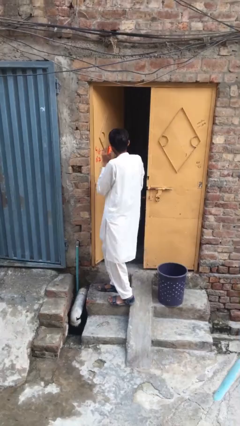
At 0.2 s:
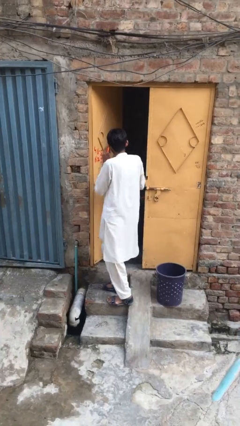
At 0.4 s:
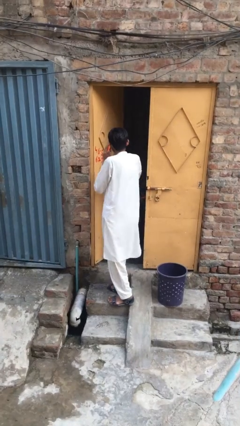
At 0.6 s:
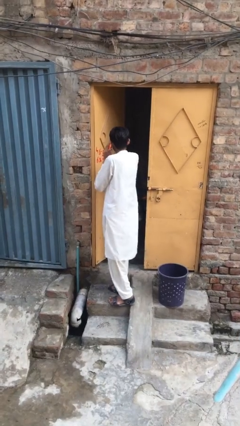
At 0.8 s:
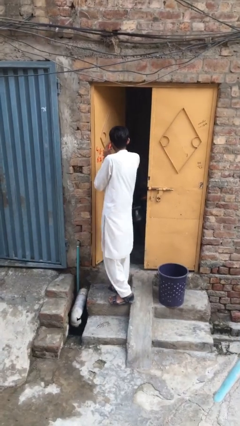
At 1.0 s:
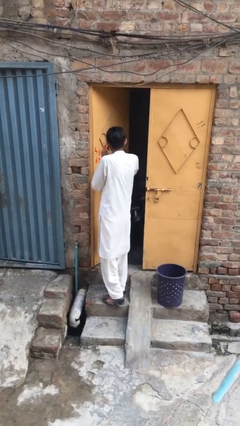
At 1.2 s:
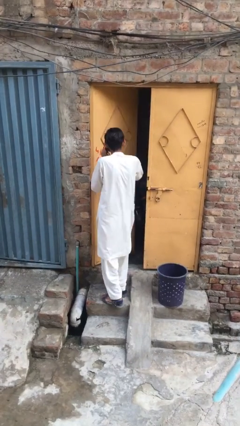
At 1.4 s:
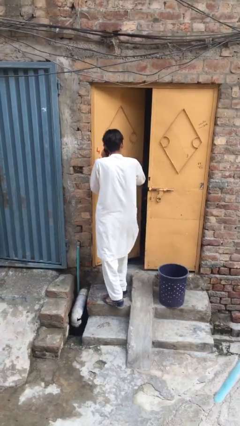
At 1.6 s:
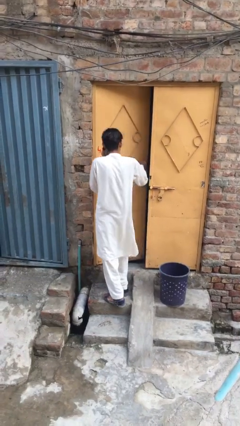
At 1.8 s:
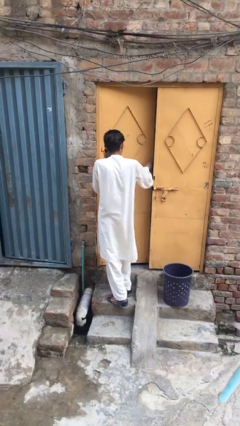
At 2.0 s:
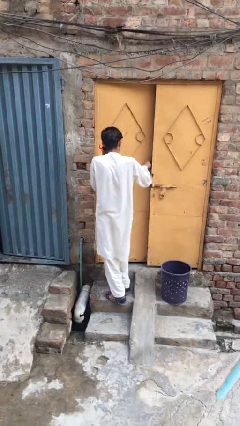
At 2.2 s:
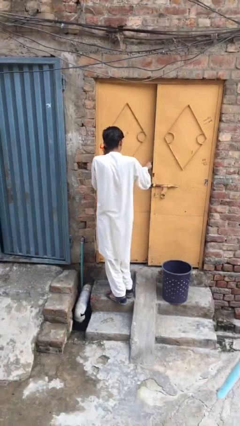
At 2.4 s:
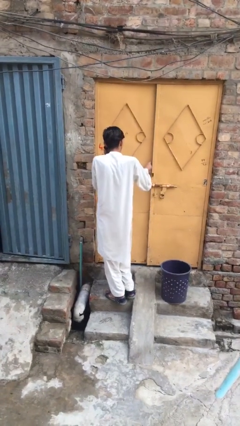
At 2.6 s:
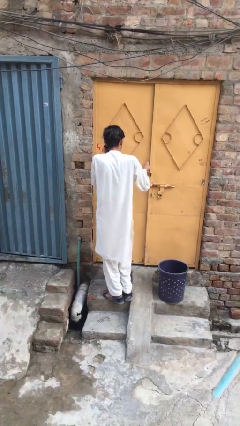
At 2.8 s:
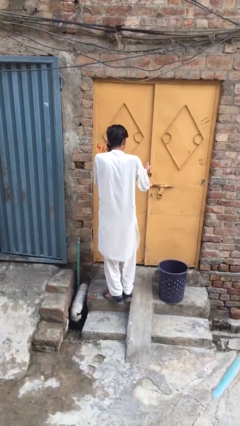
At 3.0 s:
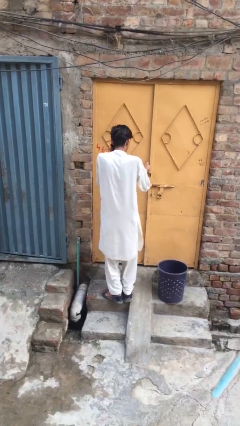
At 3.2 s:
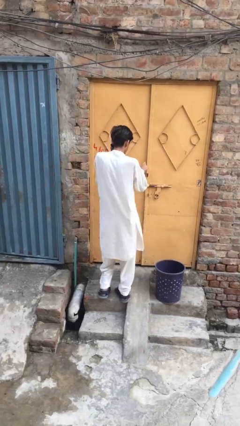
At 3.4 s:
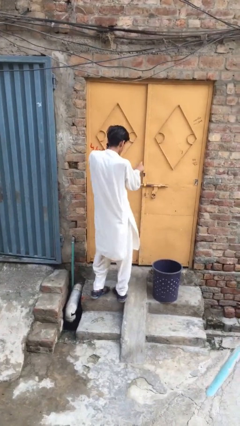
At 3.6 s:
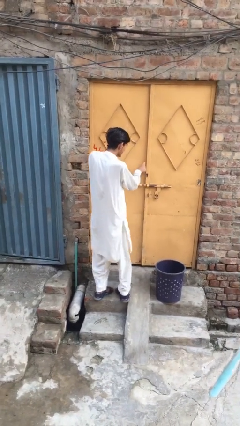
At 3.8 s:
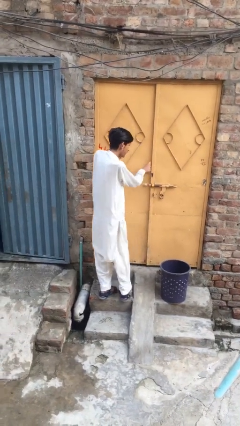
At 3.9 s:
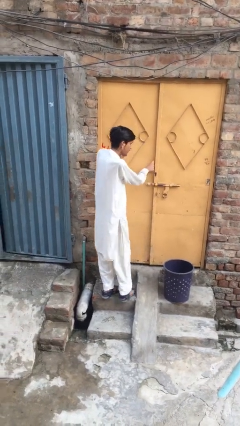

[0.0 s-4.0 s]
person closes facility door

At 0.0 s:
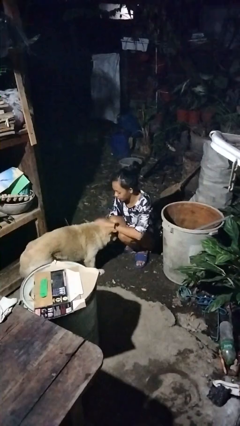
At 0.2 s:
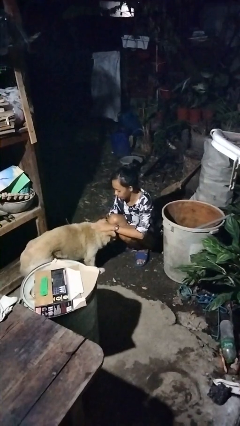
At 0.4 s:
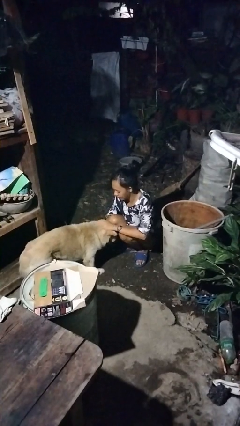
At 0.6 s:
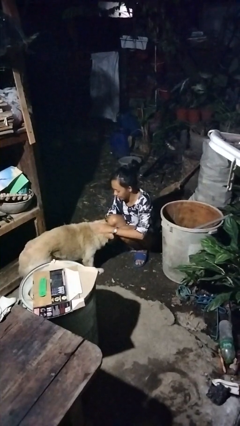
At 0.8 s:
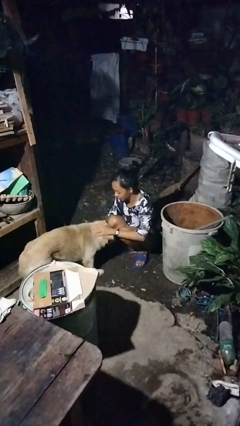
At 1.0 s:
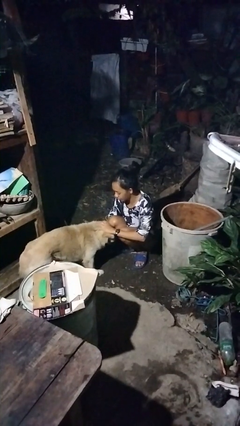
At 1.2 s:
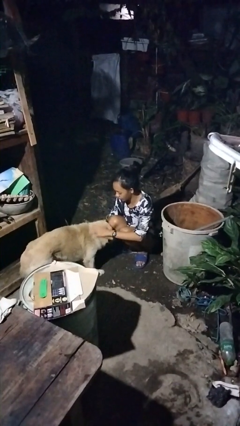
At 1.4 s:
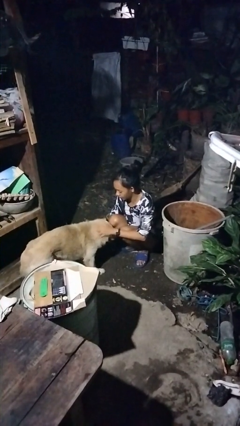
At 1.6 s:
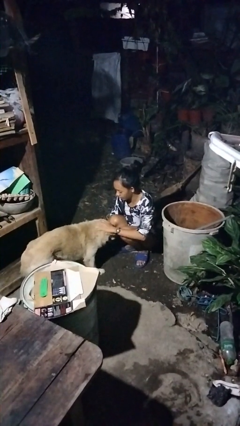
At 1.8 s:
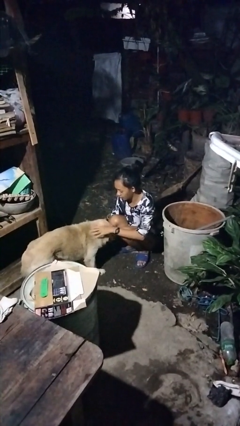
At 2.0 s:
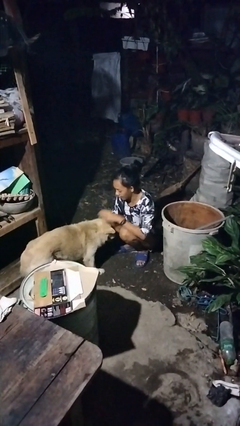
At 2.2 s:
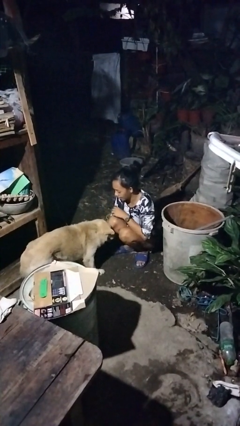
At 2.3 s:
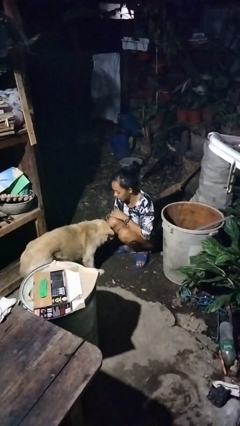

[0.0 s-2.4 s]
person pets dog

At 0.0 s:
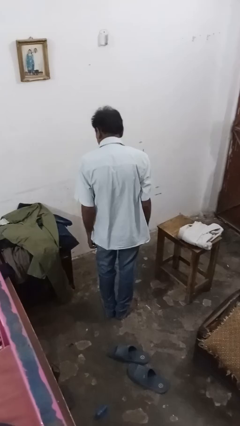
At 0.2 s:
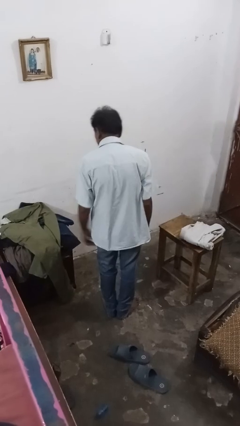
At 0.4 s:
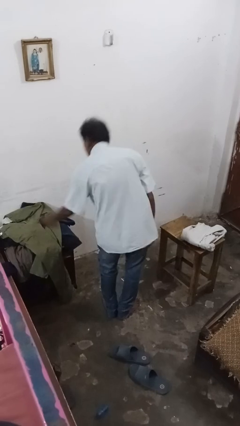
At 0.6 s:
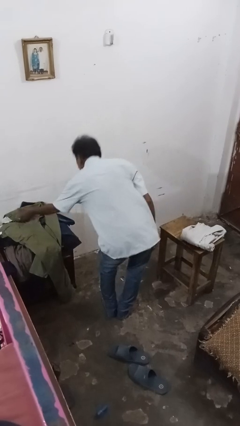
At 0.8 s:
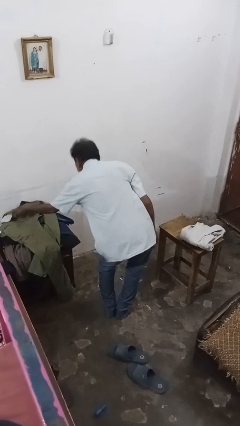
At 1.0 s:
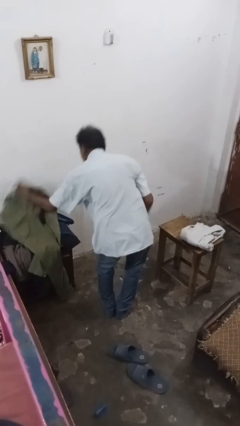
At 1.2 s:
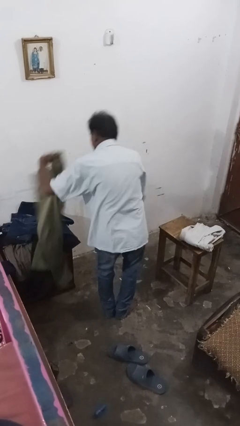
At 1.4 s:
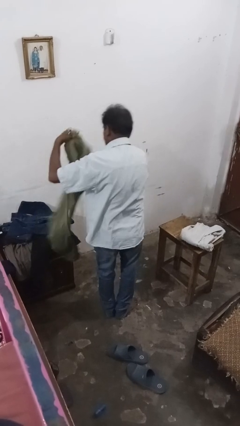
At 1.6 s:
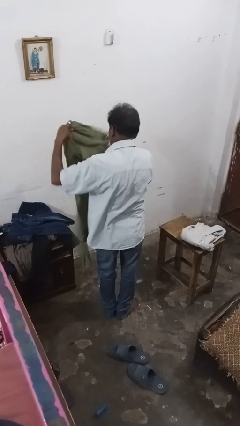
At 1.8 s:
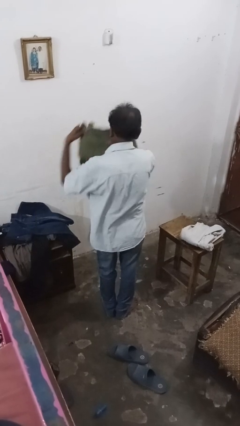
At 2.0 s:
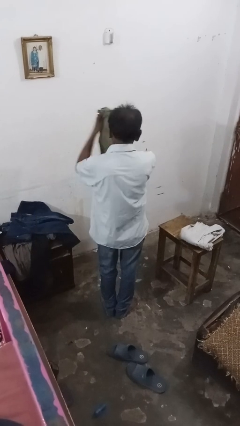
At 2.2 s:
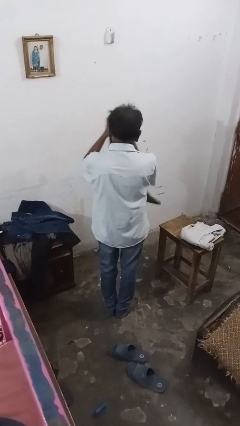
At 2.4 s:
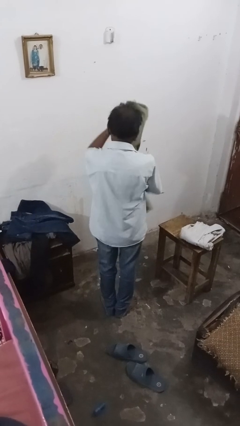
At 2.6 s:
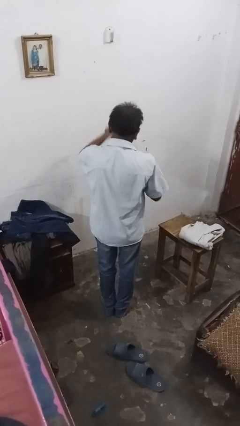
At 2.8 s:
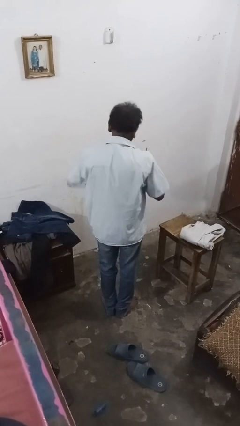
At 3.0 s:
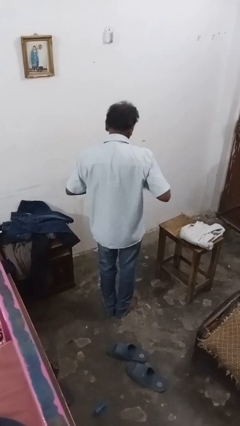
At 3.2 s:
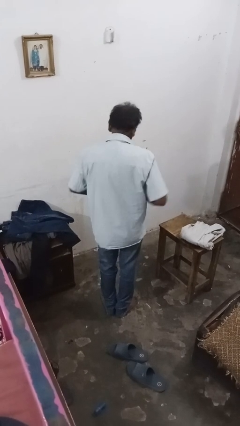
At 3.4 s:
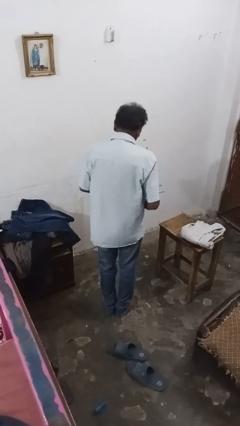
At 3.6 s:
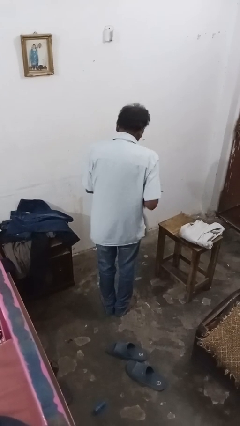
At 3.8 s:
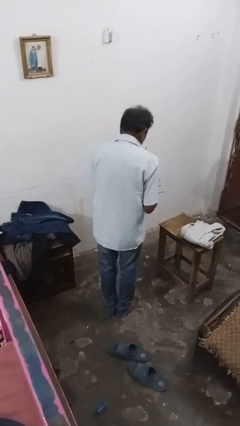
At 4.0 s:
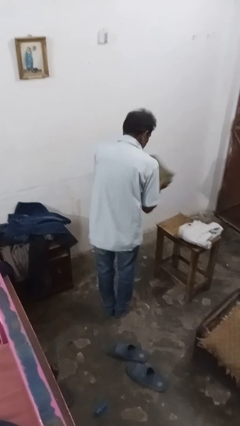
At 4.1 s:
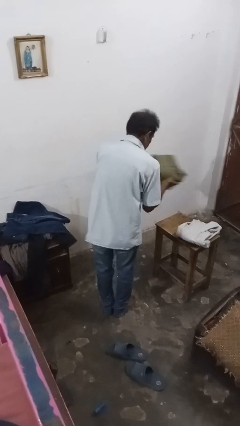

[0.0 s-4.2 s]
person folds pants

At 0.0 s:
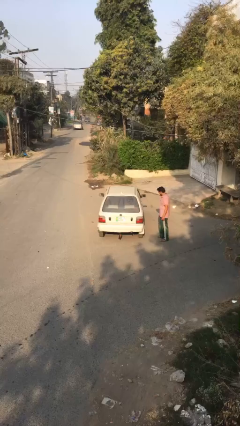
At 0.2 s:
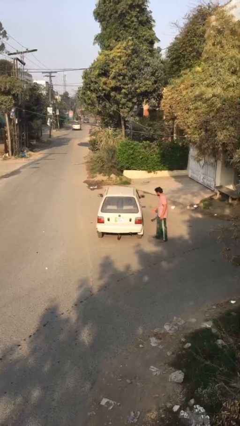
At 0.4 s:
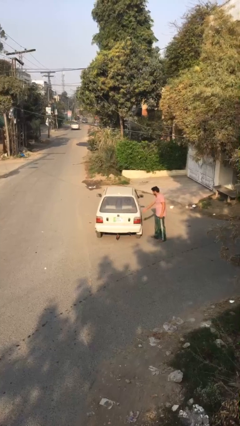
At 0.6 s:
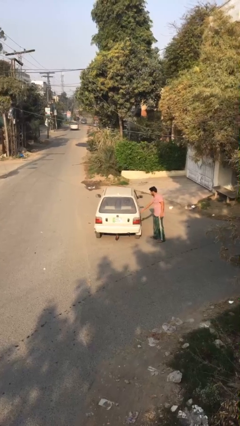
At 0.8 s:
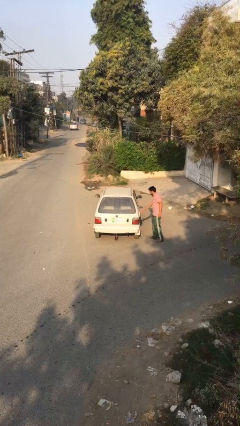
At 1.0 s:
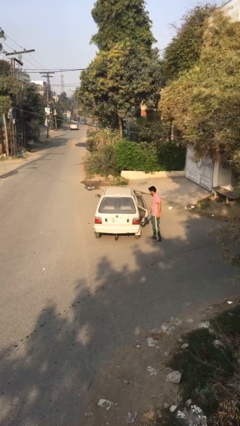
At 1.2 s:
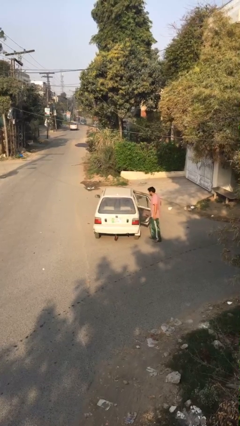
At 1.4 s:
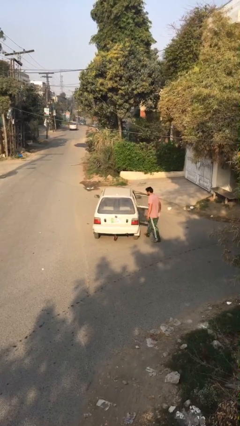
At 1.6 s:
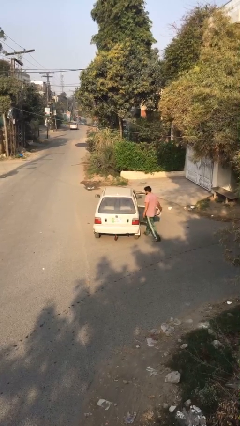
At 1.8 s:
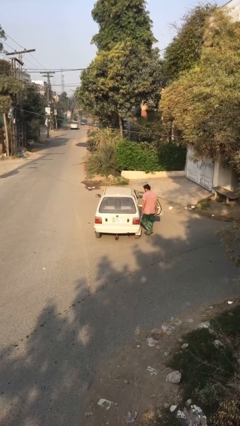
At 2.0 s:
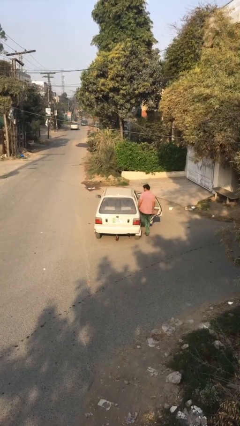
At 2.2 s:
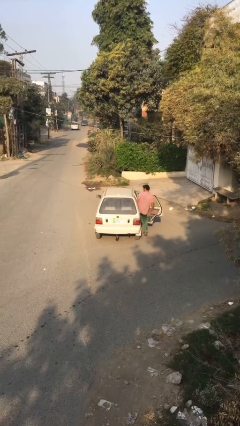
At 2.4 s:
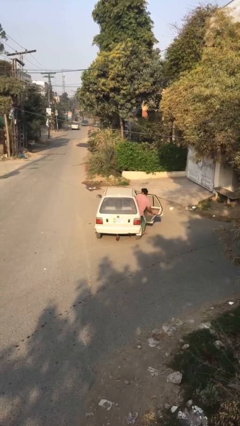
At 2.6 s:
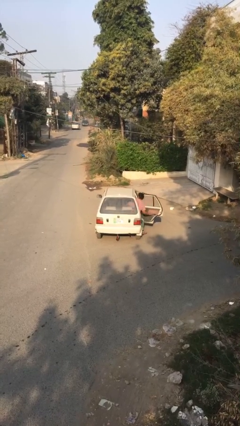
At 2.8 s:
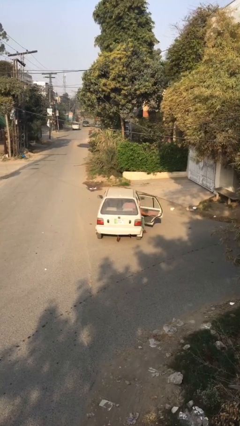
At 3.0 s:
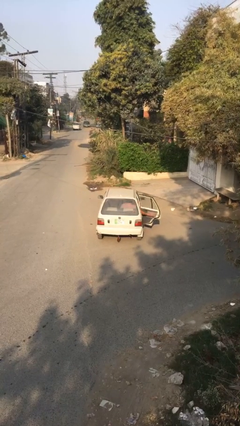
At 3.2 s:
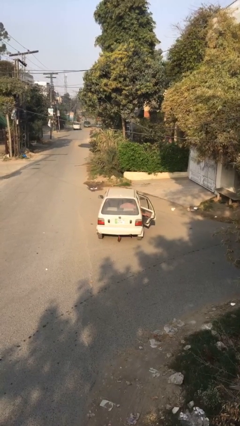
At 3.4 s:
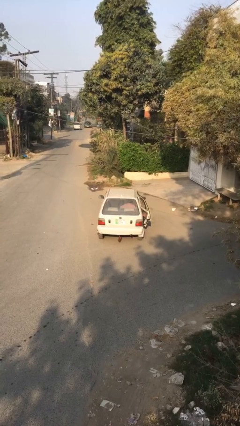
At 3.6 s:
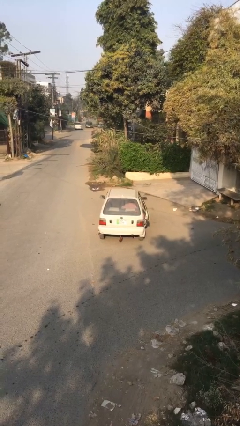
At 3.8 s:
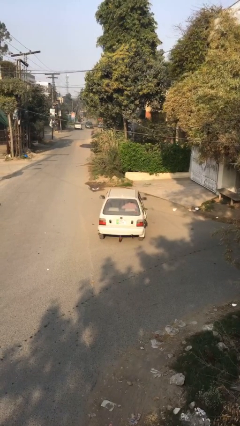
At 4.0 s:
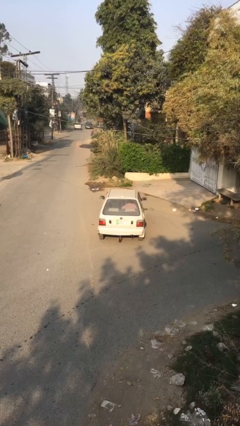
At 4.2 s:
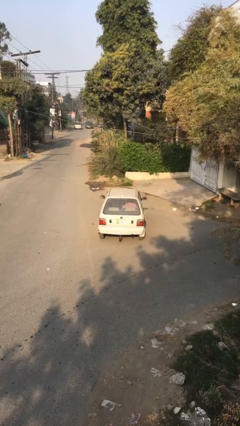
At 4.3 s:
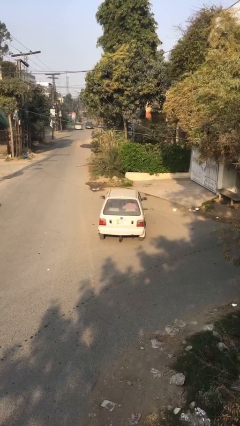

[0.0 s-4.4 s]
car picks up person

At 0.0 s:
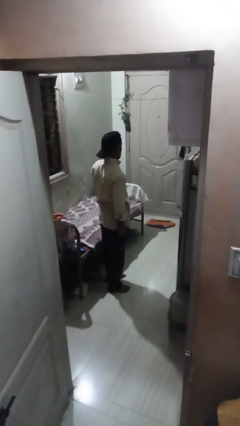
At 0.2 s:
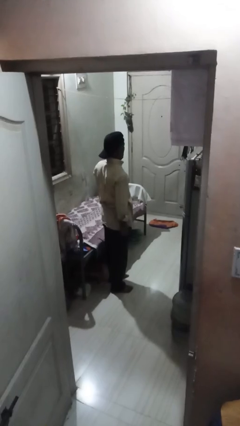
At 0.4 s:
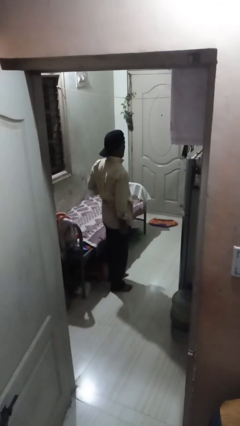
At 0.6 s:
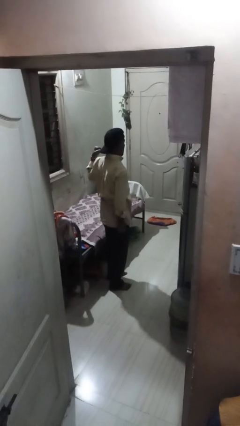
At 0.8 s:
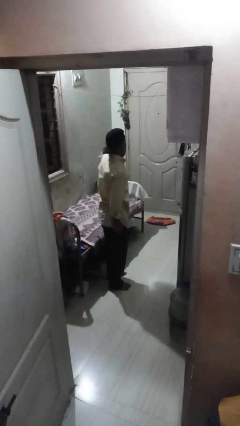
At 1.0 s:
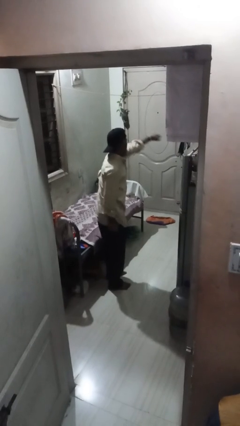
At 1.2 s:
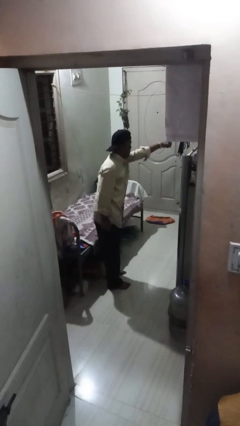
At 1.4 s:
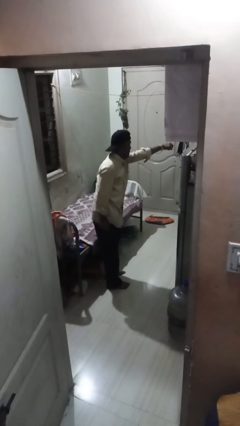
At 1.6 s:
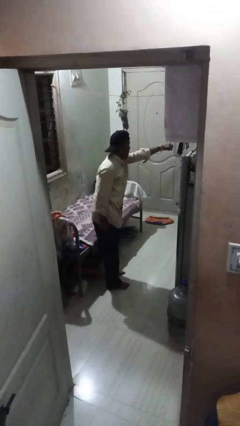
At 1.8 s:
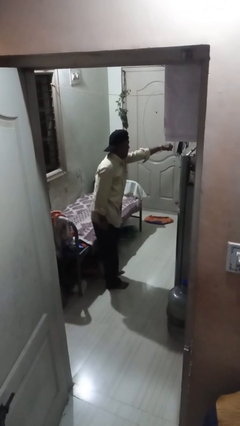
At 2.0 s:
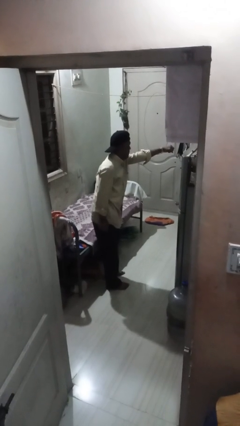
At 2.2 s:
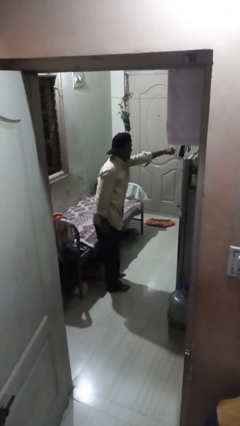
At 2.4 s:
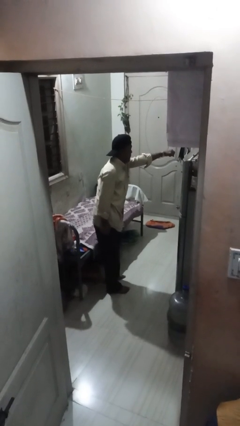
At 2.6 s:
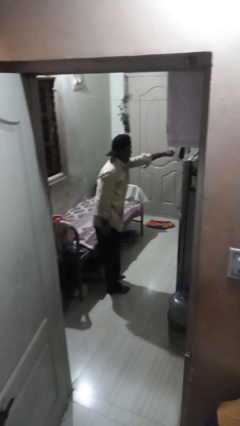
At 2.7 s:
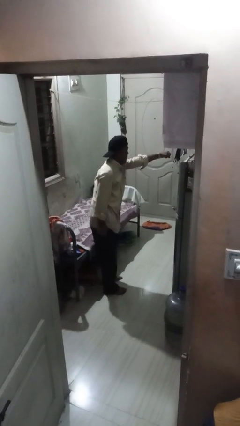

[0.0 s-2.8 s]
person punches
